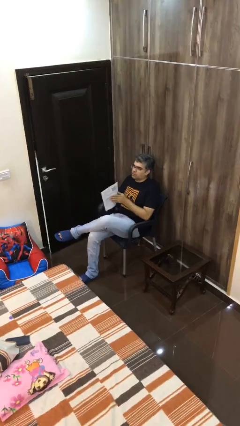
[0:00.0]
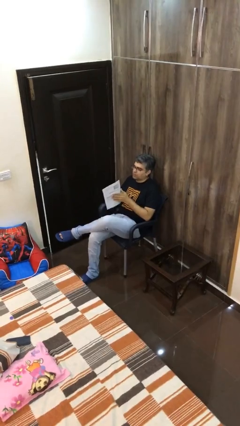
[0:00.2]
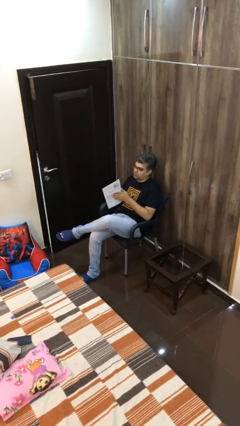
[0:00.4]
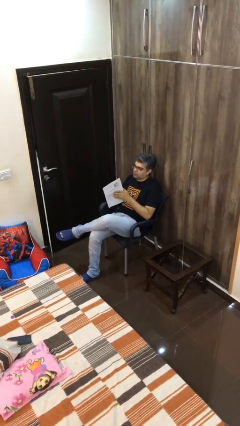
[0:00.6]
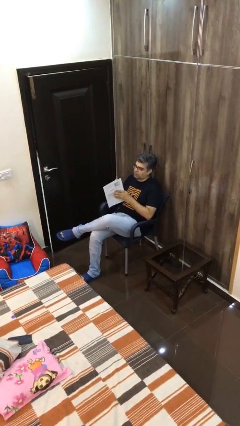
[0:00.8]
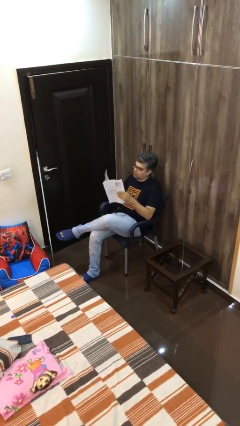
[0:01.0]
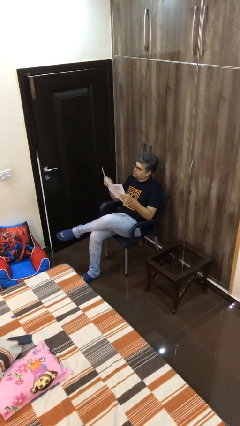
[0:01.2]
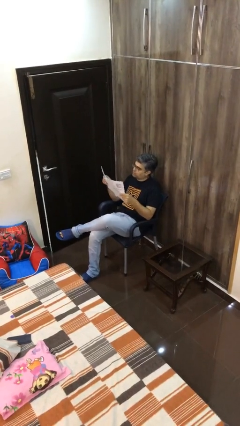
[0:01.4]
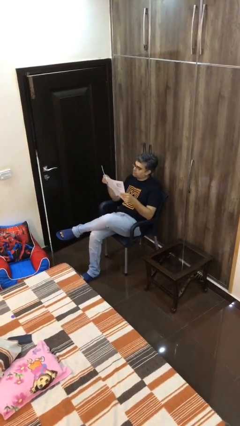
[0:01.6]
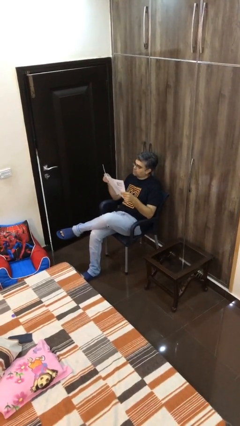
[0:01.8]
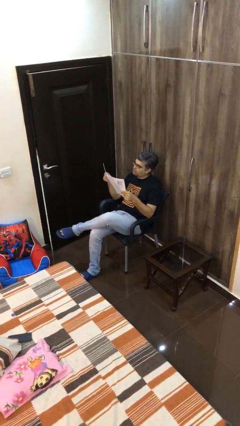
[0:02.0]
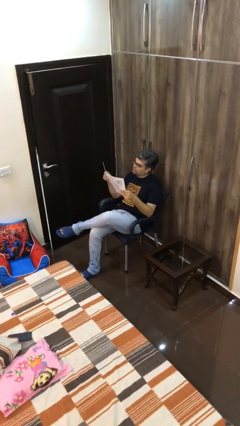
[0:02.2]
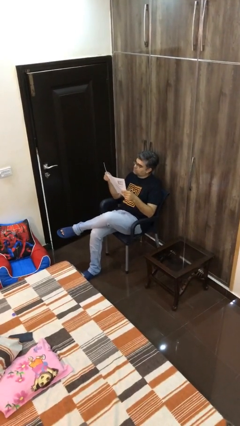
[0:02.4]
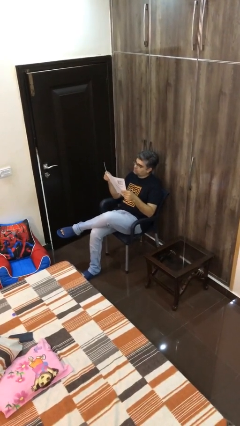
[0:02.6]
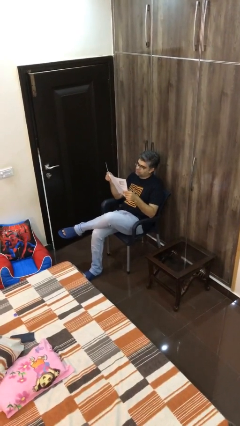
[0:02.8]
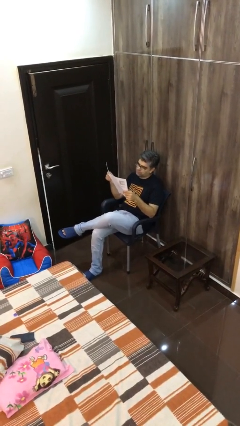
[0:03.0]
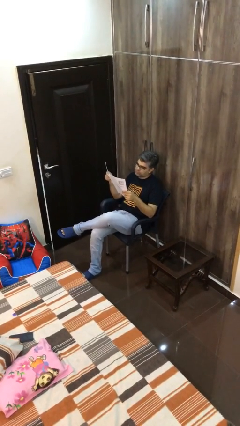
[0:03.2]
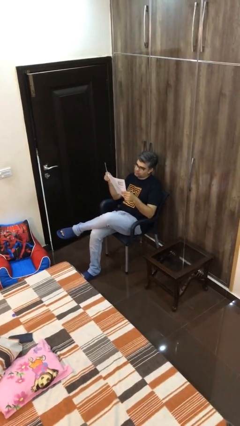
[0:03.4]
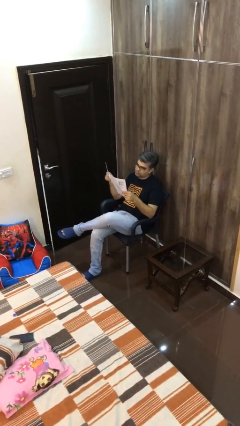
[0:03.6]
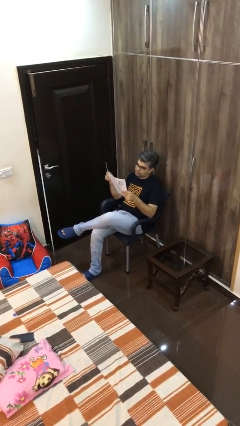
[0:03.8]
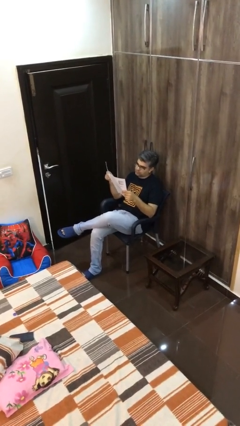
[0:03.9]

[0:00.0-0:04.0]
person reads document

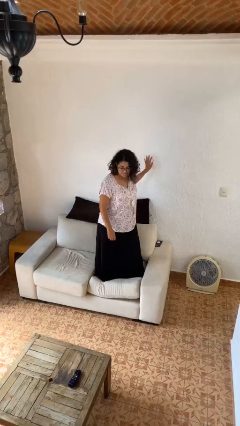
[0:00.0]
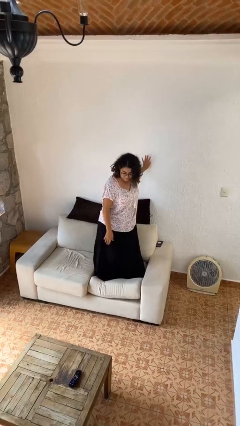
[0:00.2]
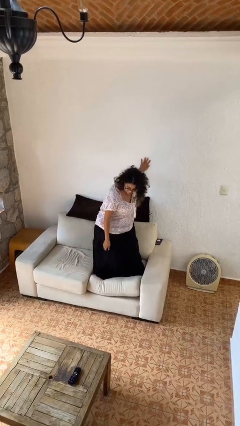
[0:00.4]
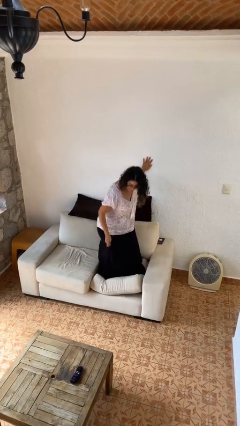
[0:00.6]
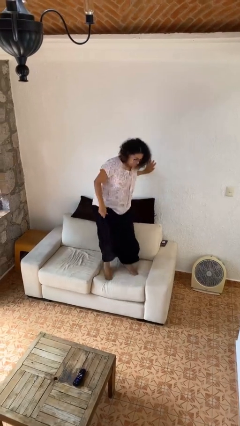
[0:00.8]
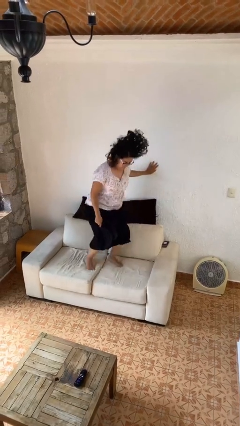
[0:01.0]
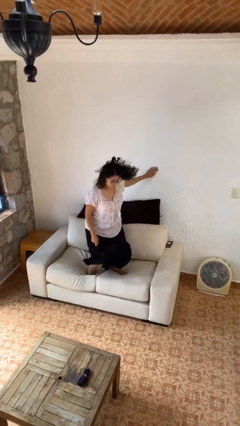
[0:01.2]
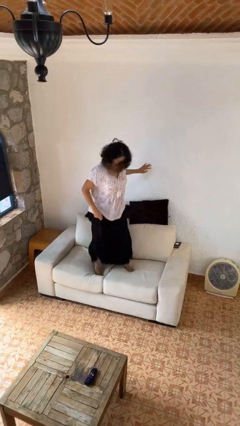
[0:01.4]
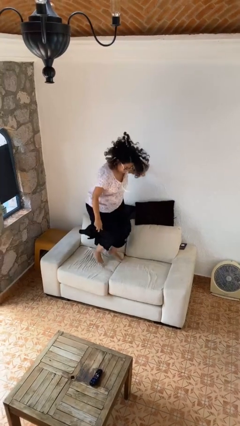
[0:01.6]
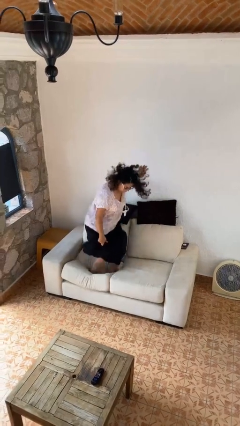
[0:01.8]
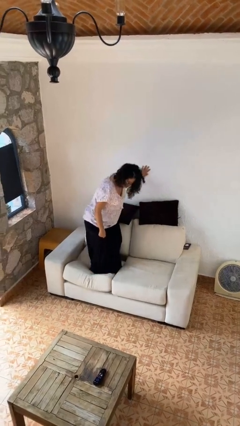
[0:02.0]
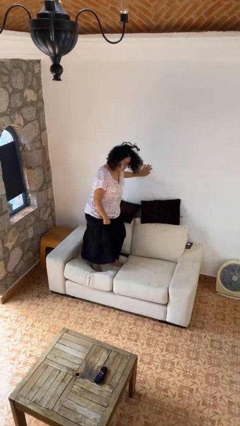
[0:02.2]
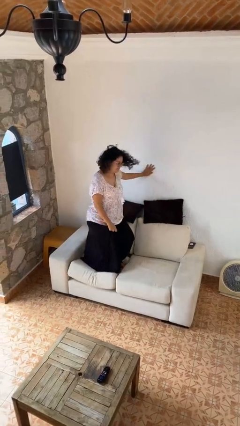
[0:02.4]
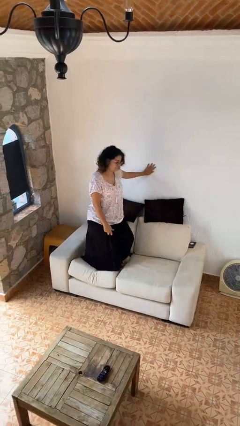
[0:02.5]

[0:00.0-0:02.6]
person jumps on couch

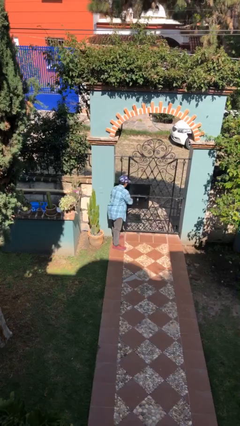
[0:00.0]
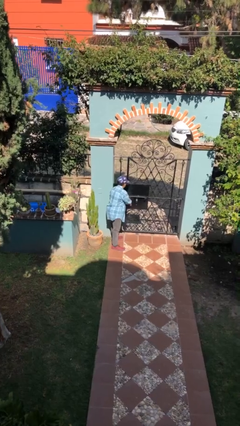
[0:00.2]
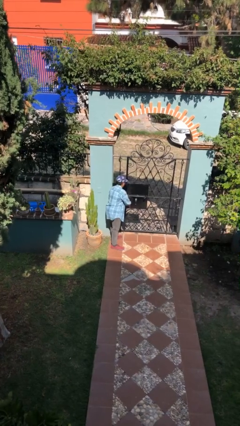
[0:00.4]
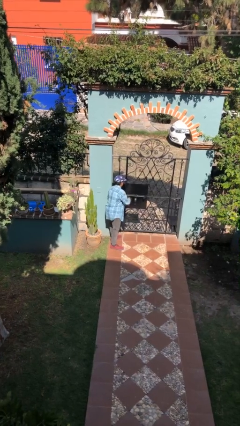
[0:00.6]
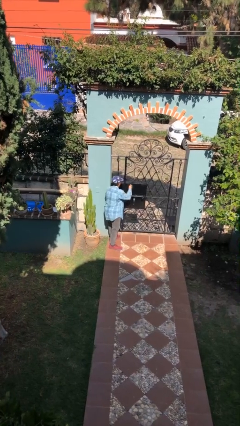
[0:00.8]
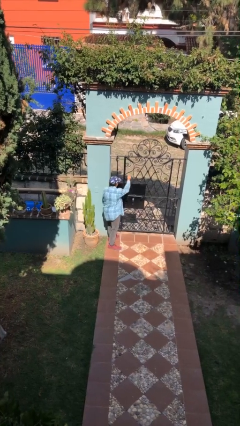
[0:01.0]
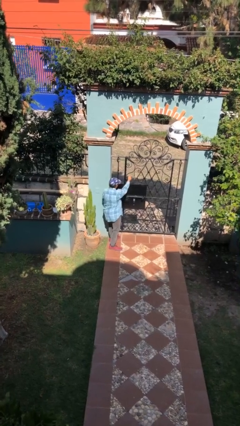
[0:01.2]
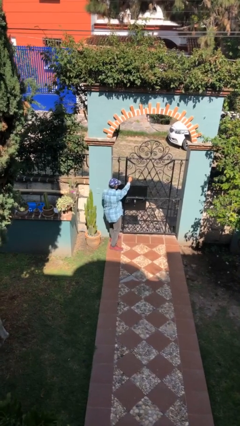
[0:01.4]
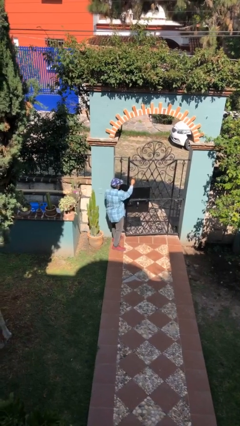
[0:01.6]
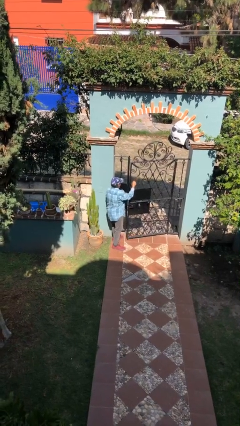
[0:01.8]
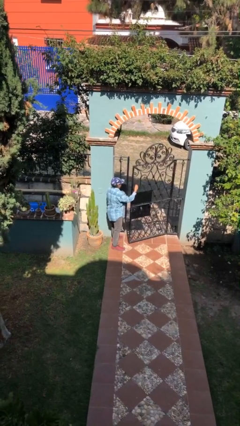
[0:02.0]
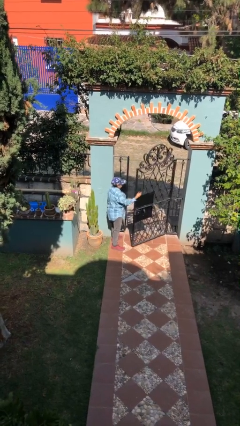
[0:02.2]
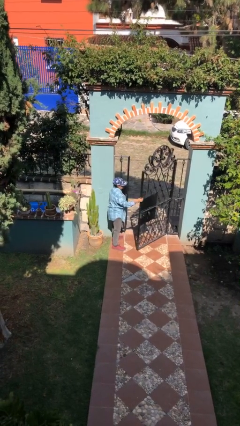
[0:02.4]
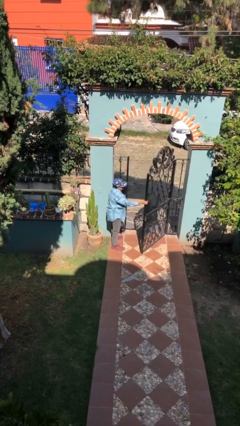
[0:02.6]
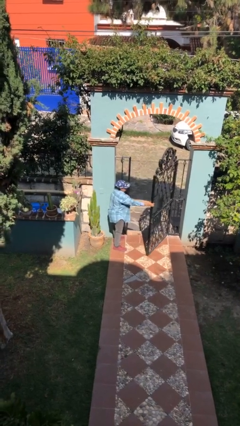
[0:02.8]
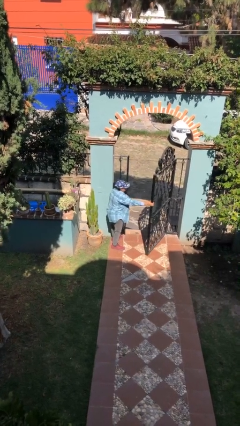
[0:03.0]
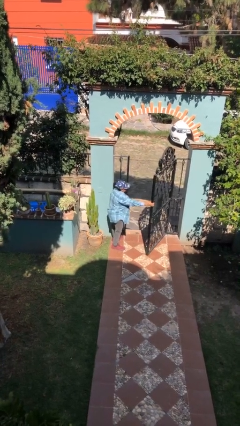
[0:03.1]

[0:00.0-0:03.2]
person opens facility door

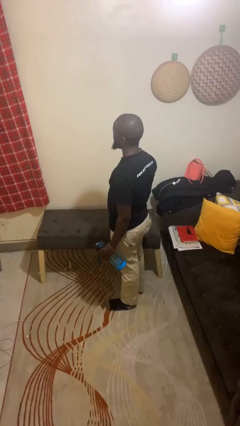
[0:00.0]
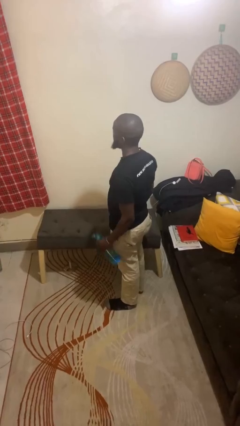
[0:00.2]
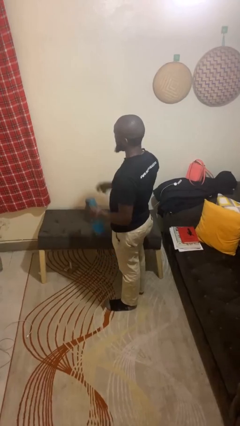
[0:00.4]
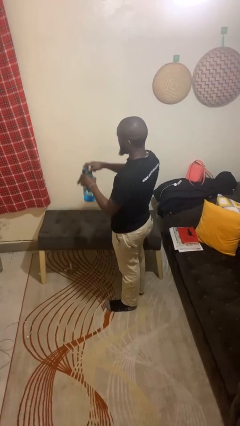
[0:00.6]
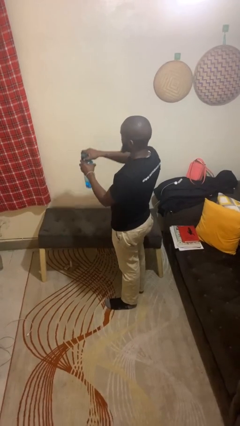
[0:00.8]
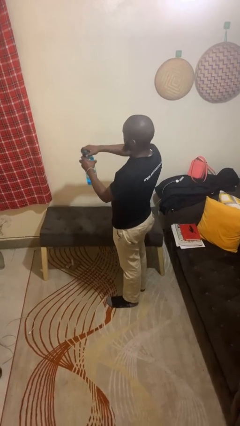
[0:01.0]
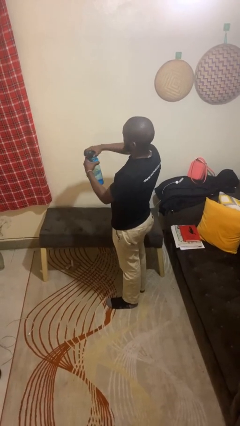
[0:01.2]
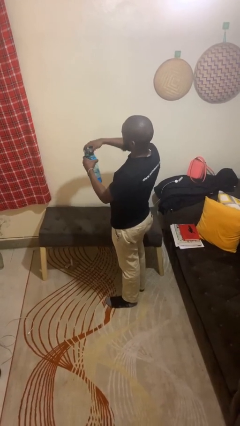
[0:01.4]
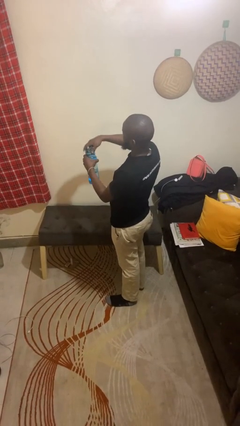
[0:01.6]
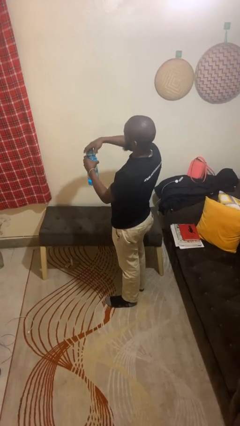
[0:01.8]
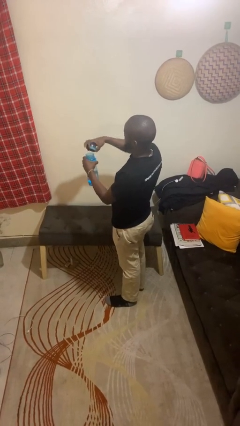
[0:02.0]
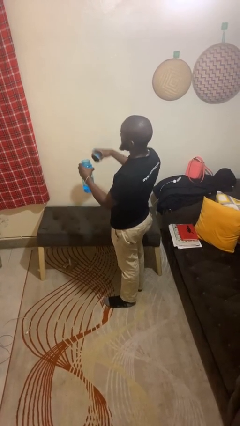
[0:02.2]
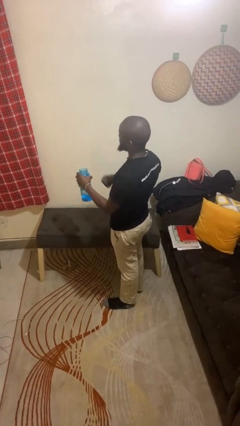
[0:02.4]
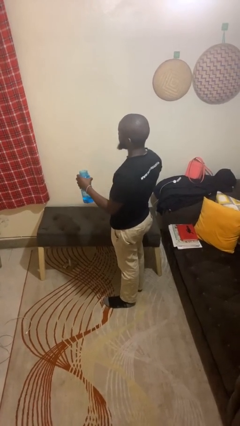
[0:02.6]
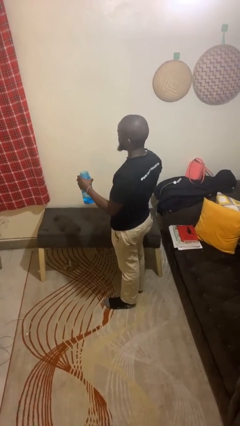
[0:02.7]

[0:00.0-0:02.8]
person opens jar

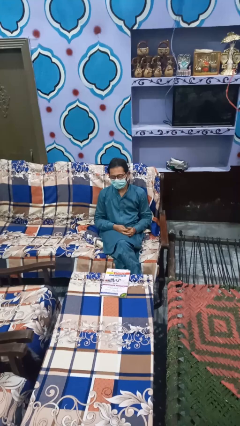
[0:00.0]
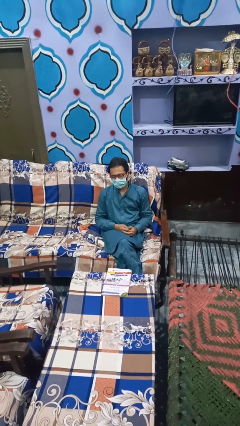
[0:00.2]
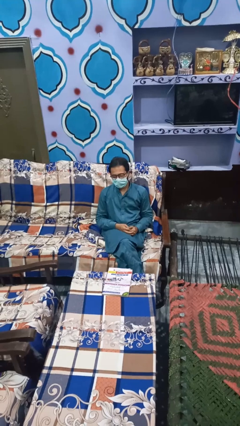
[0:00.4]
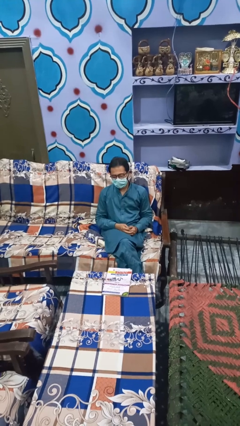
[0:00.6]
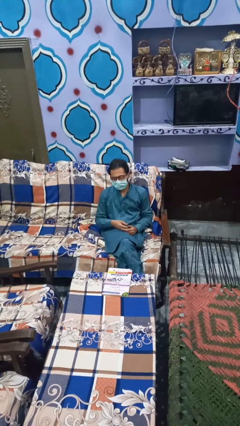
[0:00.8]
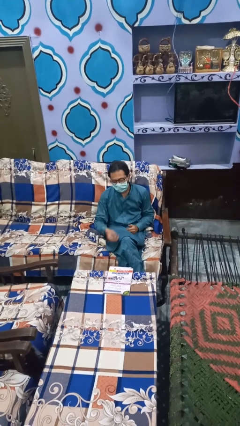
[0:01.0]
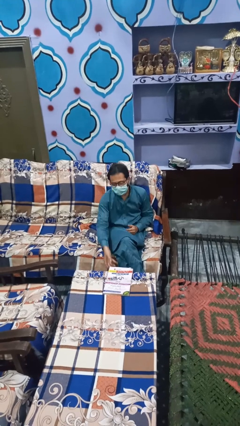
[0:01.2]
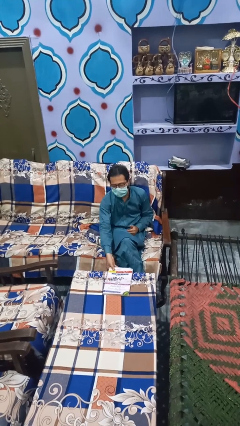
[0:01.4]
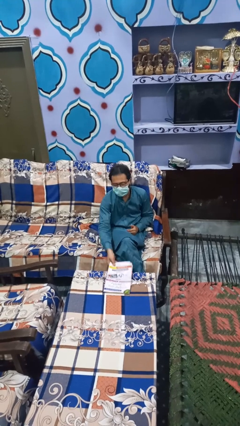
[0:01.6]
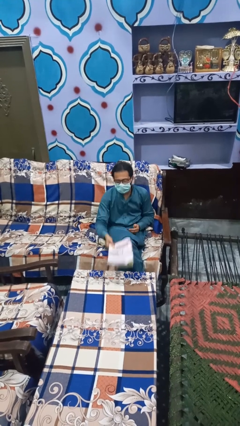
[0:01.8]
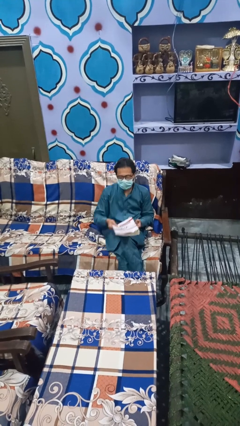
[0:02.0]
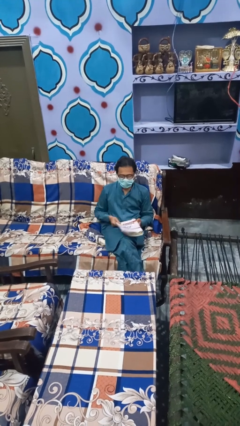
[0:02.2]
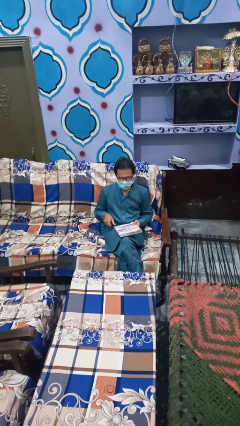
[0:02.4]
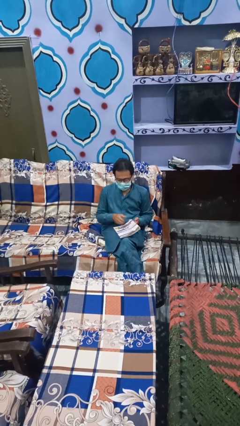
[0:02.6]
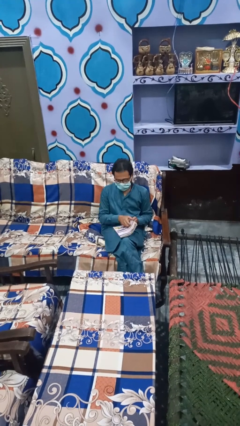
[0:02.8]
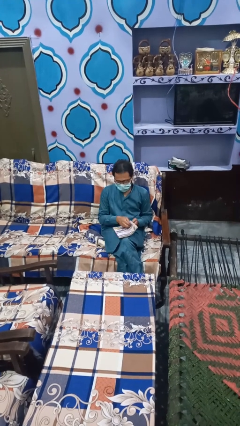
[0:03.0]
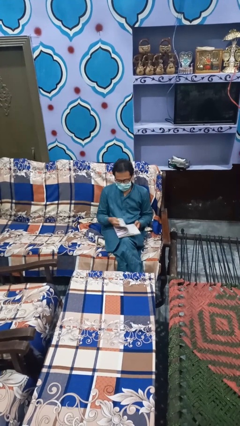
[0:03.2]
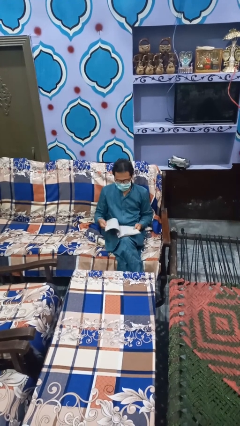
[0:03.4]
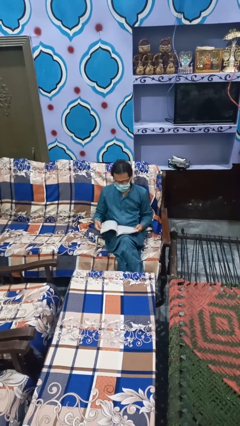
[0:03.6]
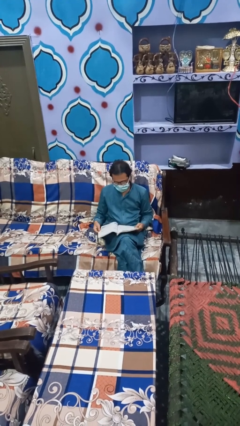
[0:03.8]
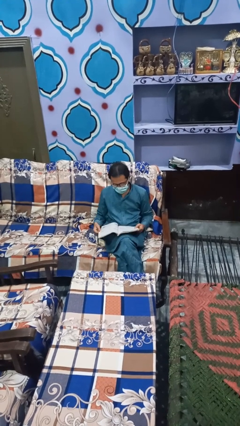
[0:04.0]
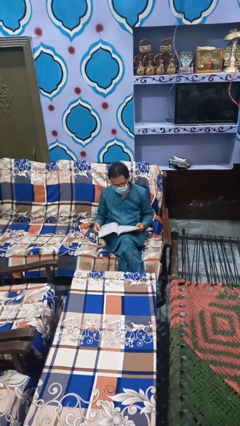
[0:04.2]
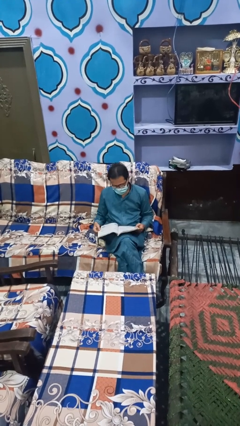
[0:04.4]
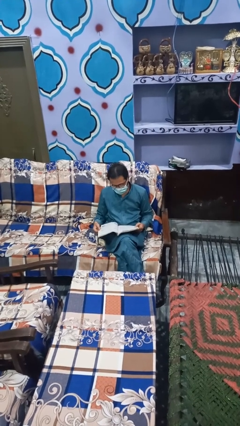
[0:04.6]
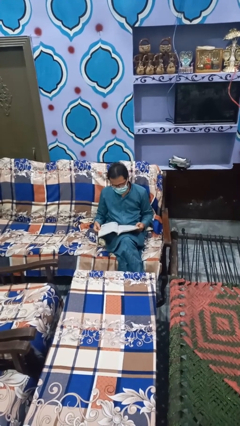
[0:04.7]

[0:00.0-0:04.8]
person reads book
